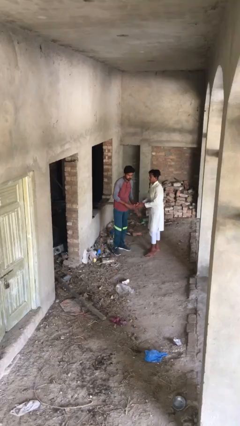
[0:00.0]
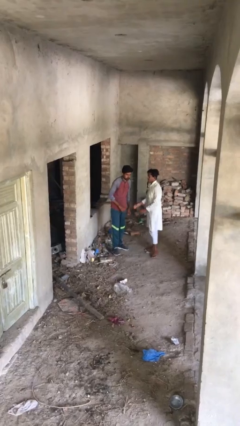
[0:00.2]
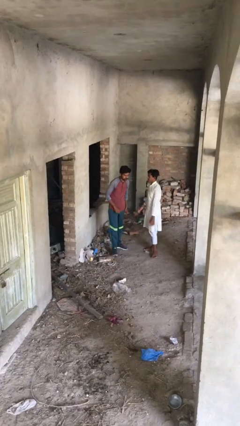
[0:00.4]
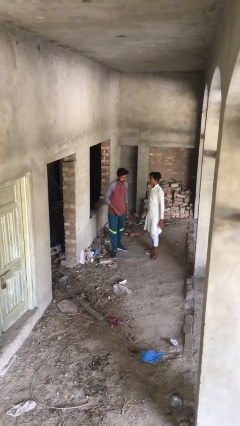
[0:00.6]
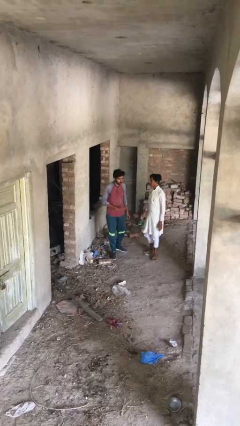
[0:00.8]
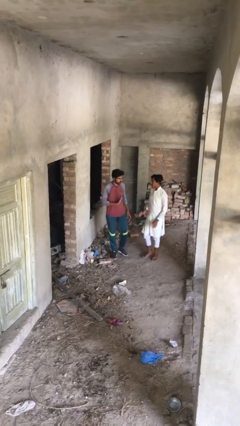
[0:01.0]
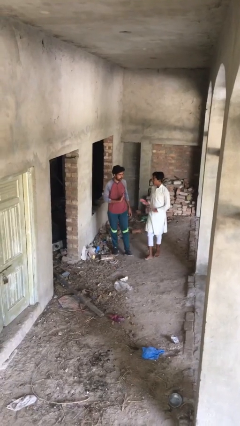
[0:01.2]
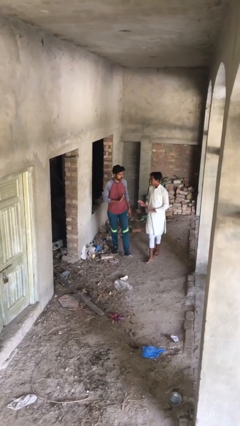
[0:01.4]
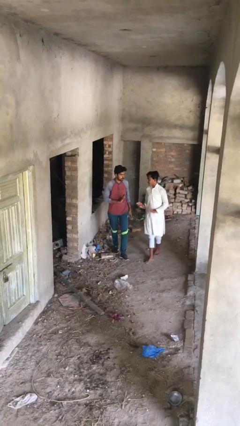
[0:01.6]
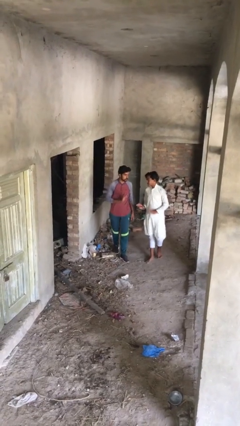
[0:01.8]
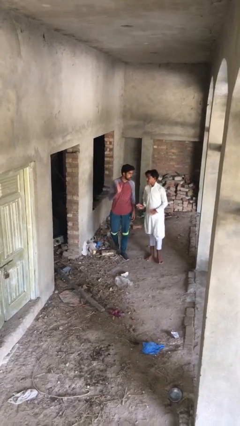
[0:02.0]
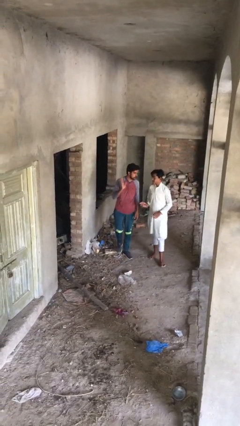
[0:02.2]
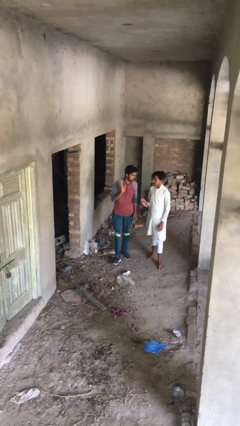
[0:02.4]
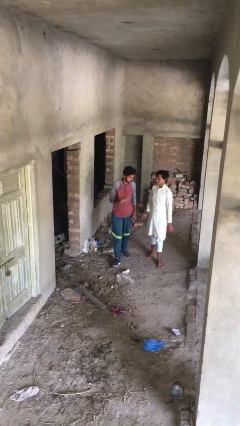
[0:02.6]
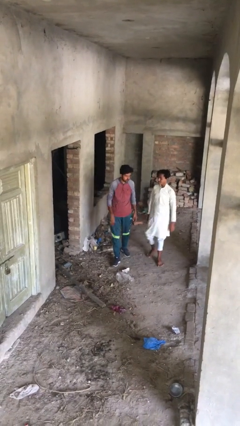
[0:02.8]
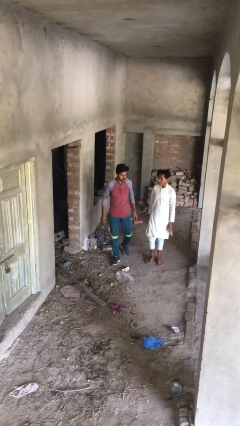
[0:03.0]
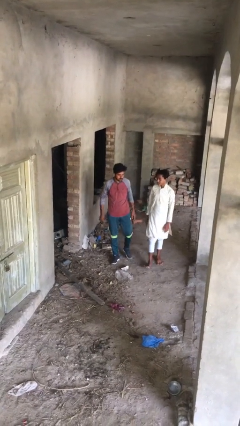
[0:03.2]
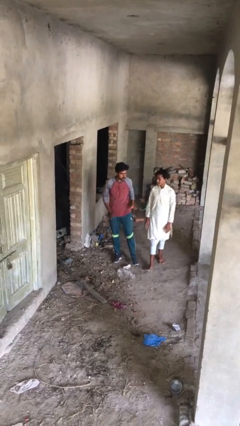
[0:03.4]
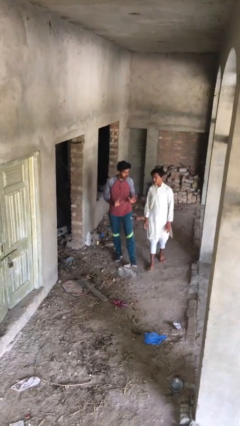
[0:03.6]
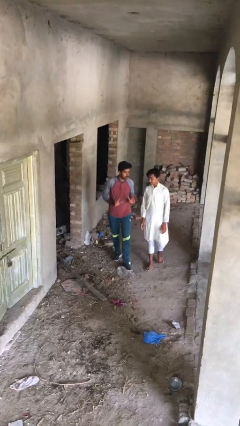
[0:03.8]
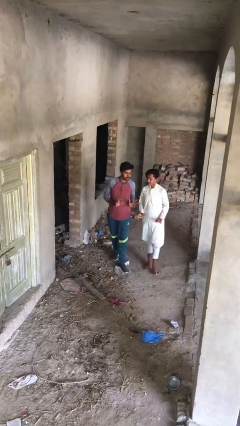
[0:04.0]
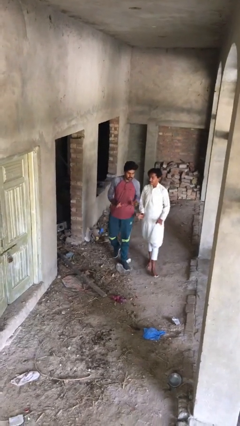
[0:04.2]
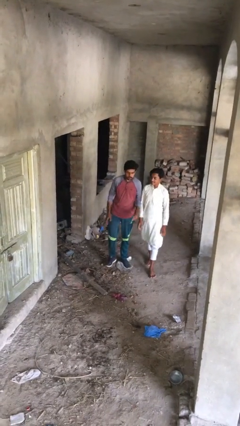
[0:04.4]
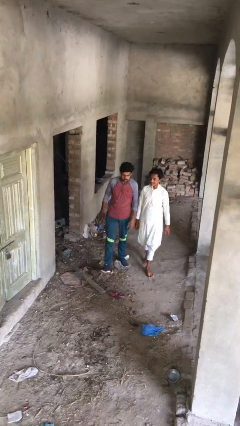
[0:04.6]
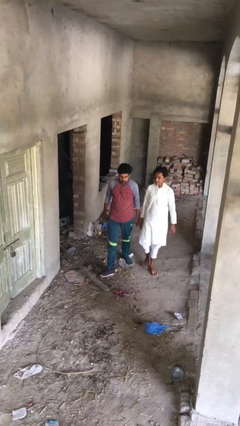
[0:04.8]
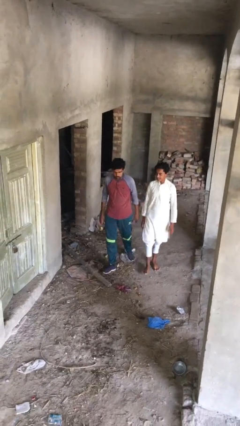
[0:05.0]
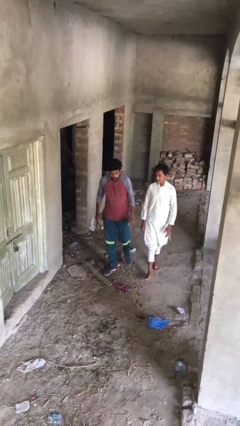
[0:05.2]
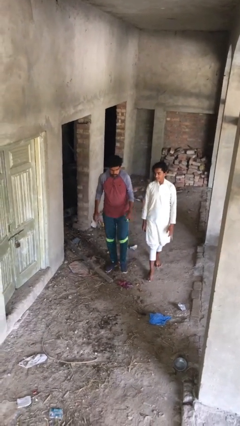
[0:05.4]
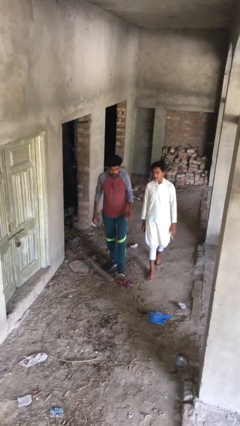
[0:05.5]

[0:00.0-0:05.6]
person talks to person

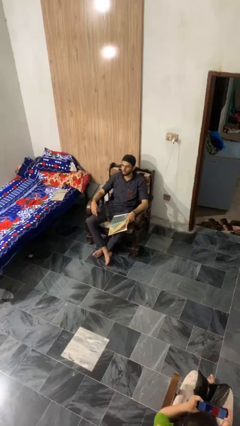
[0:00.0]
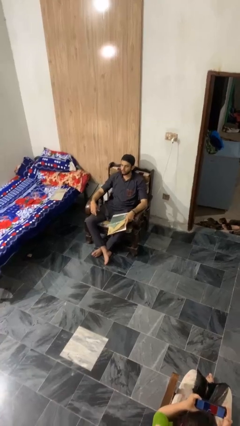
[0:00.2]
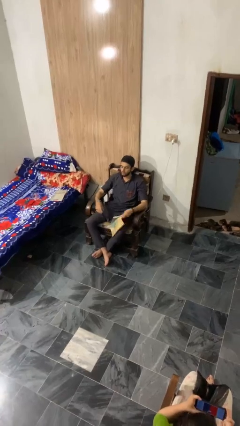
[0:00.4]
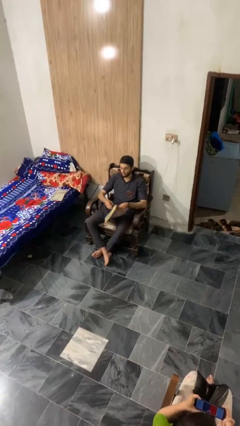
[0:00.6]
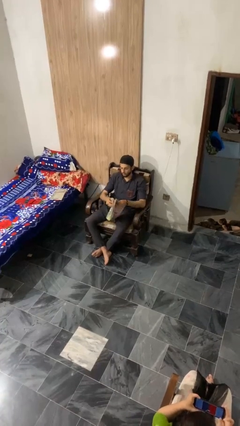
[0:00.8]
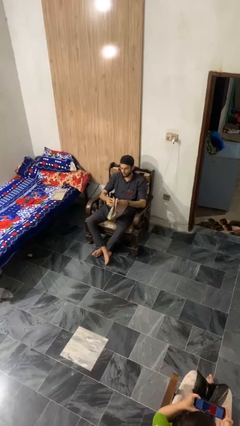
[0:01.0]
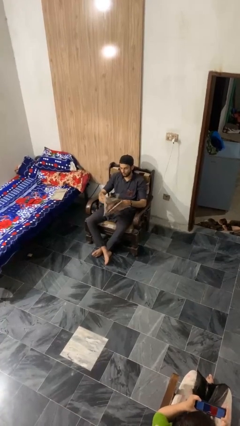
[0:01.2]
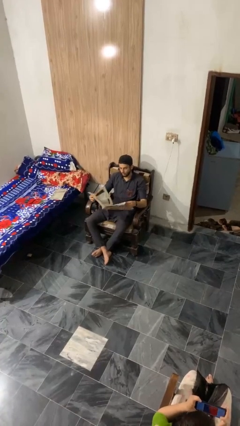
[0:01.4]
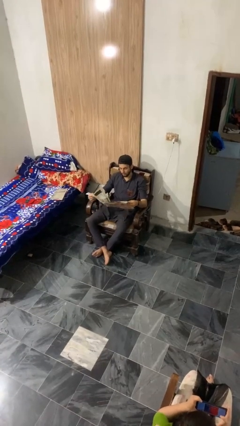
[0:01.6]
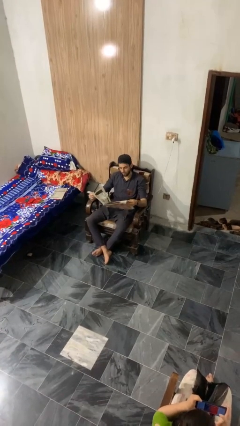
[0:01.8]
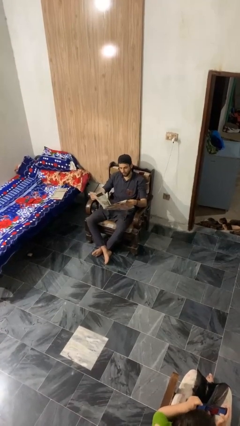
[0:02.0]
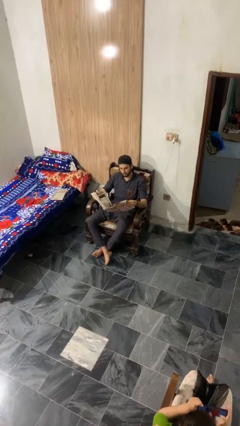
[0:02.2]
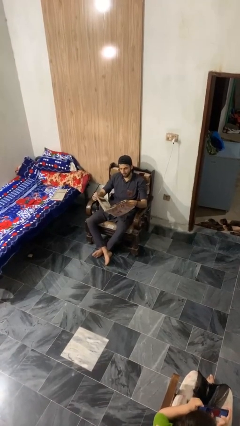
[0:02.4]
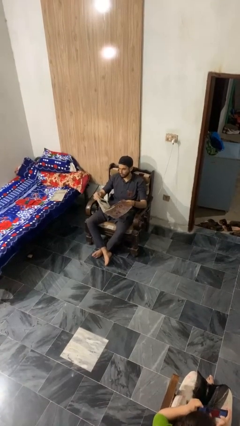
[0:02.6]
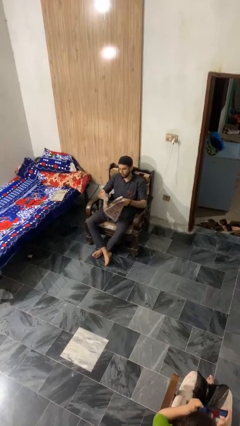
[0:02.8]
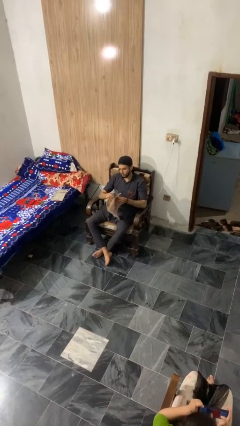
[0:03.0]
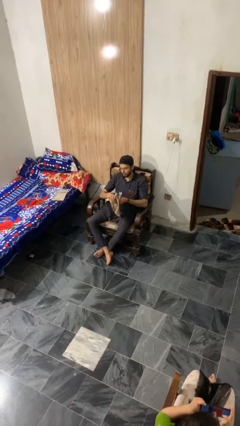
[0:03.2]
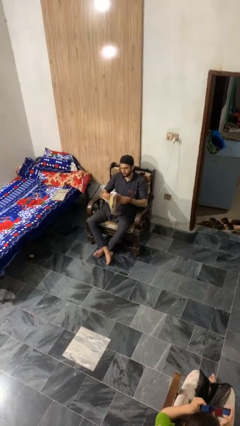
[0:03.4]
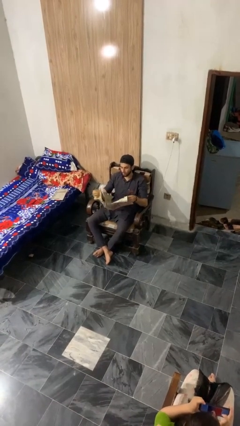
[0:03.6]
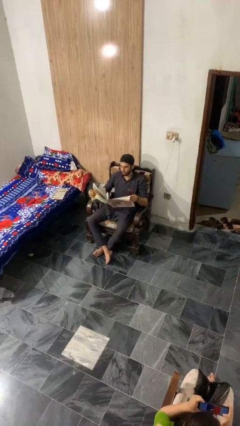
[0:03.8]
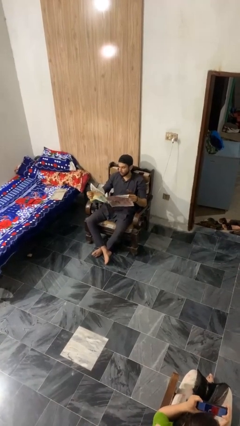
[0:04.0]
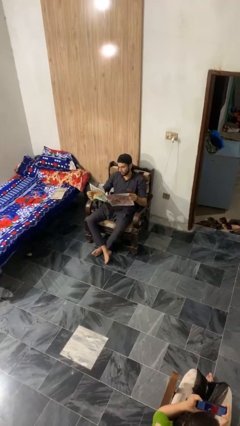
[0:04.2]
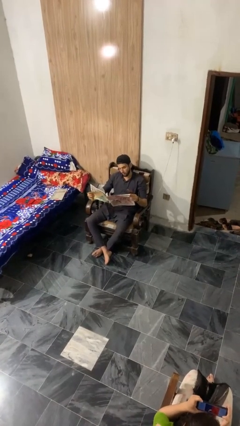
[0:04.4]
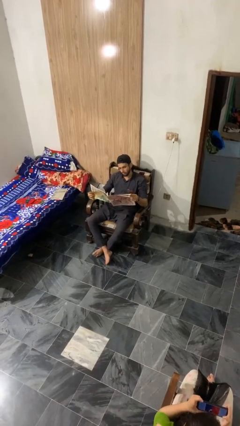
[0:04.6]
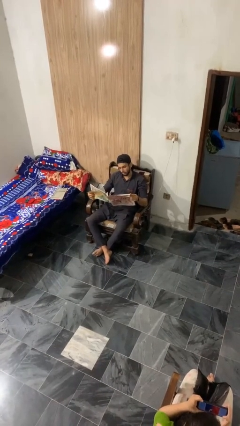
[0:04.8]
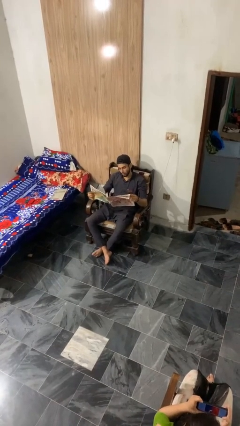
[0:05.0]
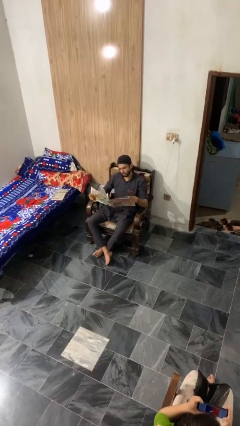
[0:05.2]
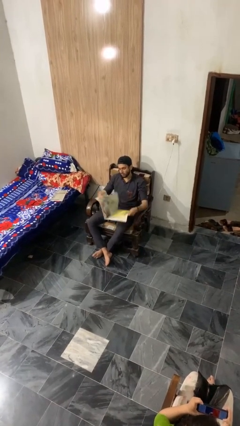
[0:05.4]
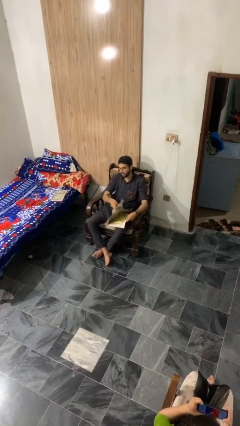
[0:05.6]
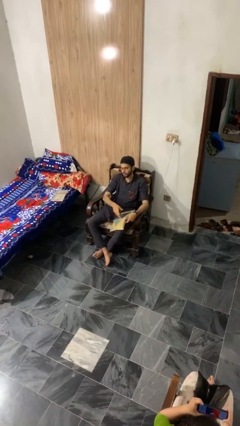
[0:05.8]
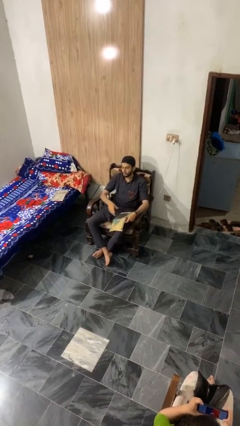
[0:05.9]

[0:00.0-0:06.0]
person reads magazine

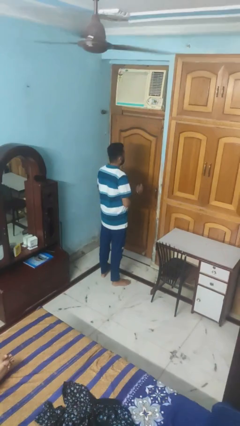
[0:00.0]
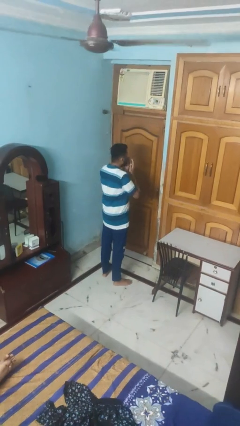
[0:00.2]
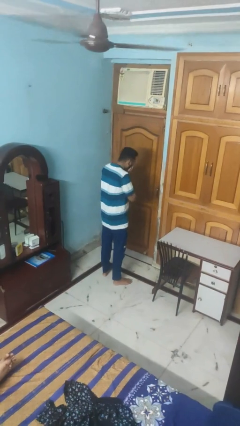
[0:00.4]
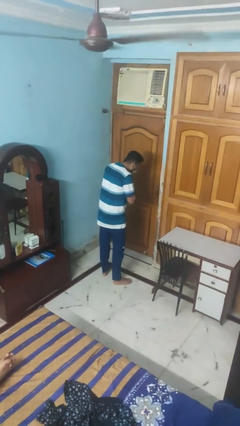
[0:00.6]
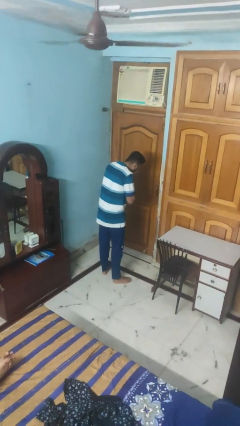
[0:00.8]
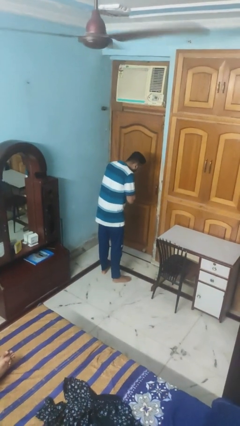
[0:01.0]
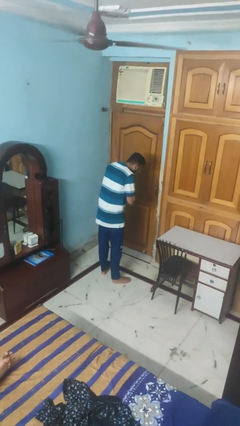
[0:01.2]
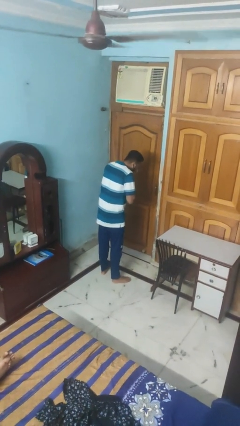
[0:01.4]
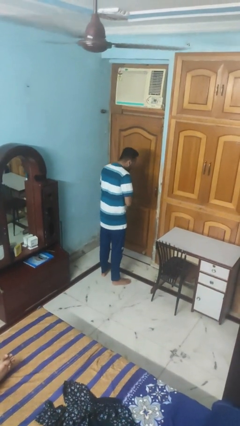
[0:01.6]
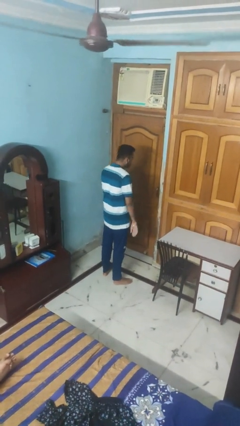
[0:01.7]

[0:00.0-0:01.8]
person sneezes into hand

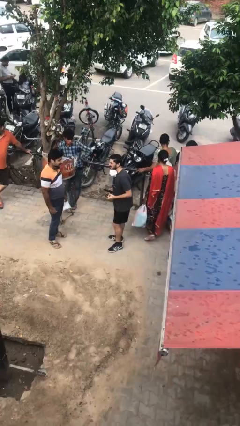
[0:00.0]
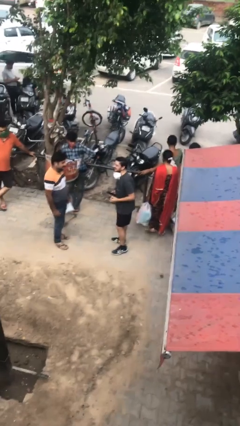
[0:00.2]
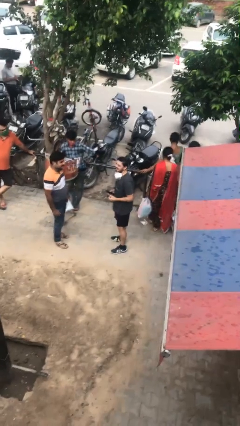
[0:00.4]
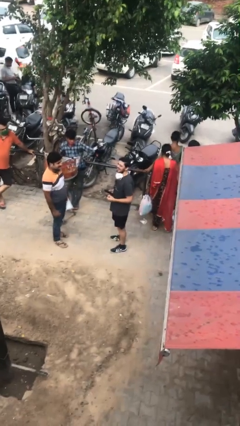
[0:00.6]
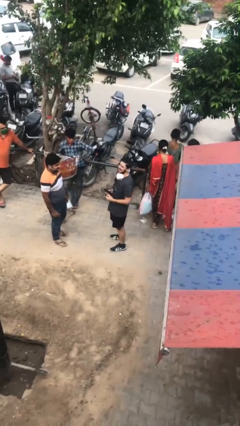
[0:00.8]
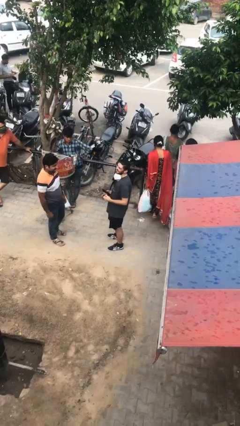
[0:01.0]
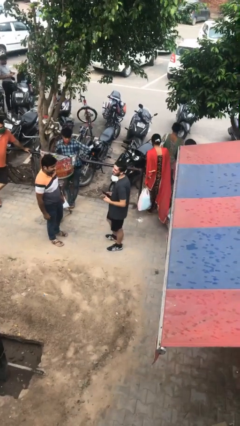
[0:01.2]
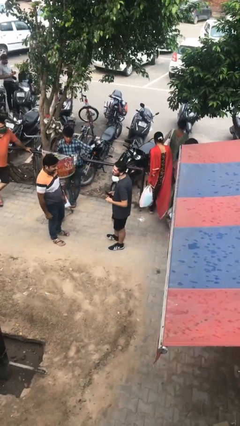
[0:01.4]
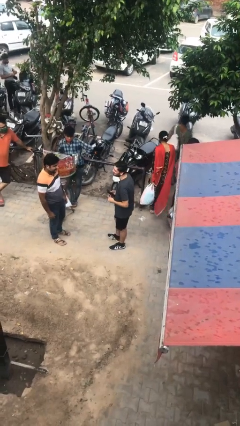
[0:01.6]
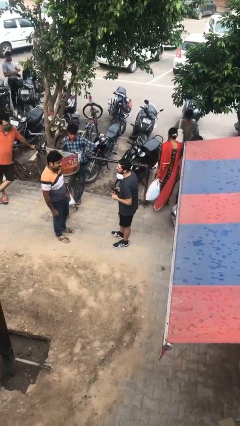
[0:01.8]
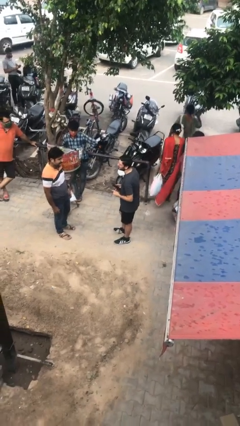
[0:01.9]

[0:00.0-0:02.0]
person laughs with person

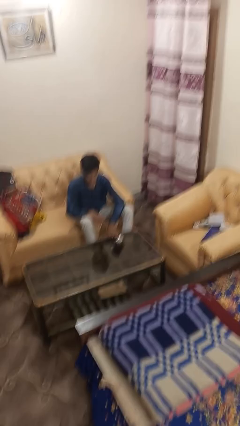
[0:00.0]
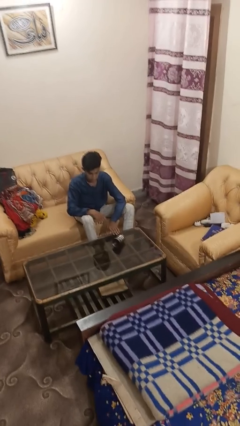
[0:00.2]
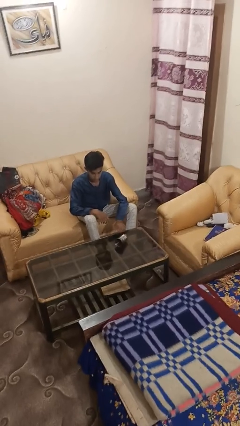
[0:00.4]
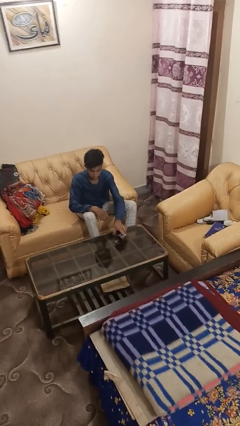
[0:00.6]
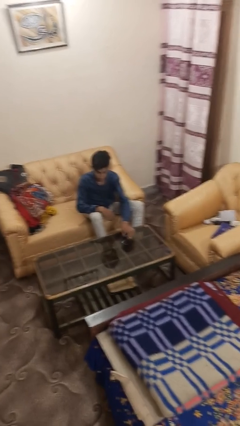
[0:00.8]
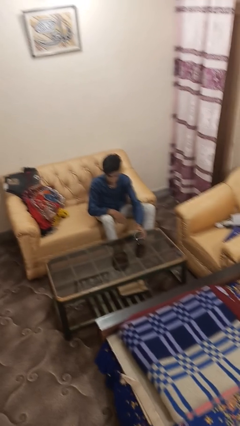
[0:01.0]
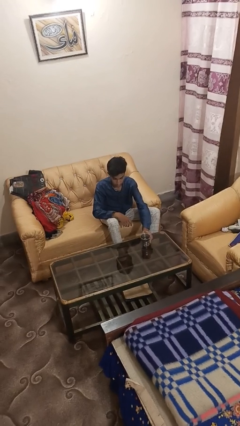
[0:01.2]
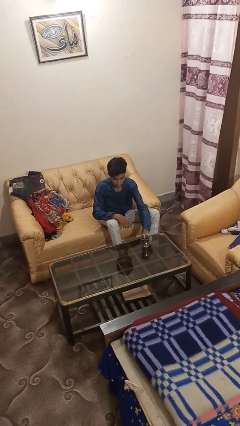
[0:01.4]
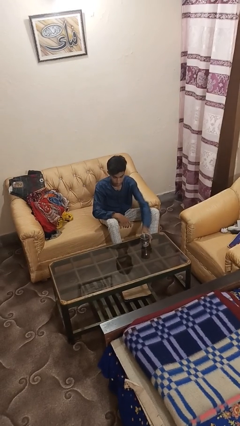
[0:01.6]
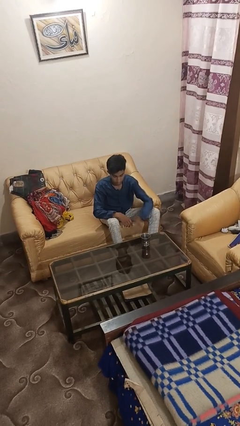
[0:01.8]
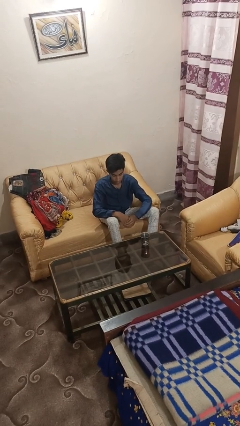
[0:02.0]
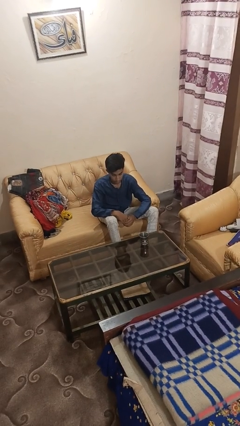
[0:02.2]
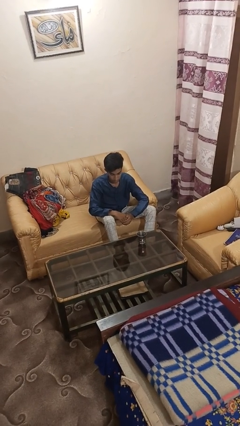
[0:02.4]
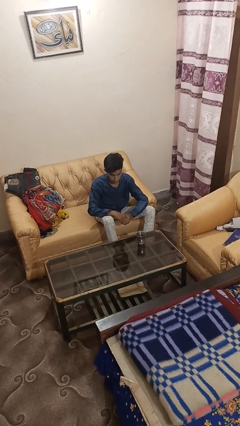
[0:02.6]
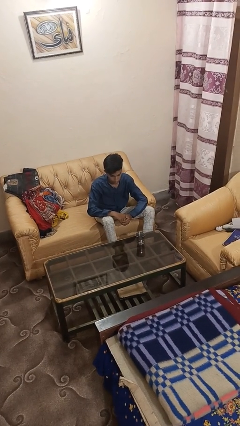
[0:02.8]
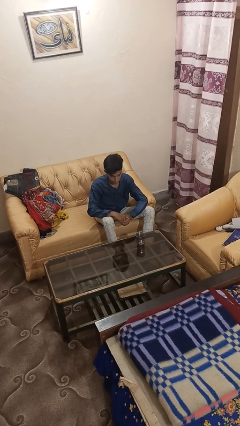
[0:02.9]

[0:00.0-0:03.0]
person sets upright glass
